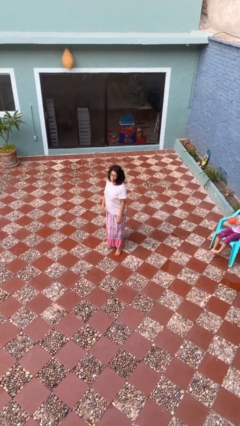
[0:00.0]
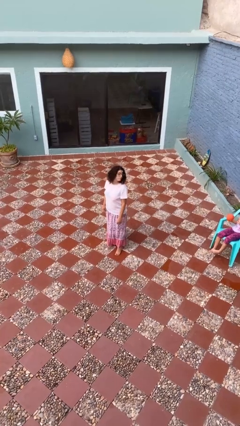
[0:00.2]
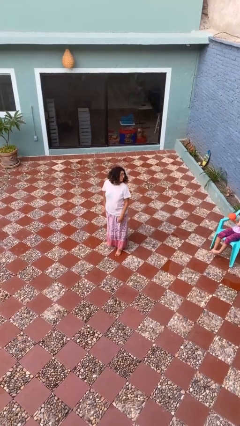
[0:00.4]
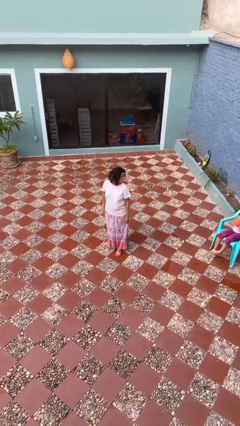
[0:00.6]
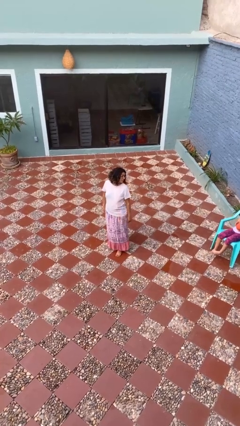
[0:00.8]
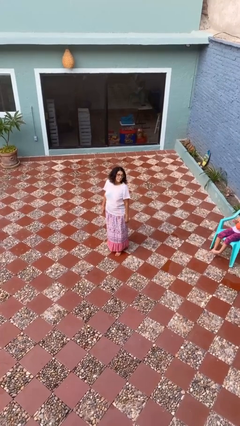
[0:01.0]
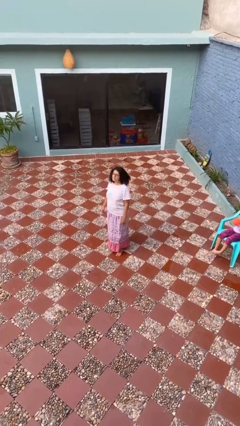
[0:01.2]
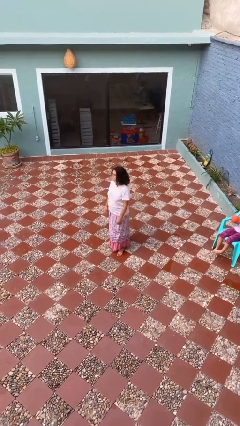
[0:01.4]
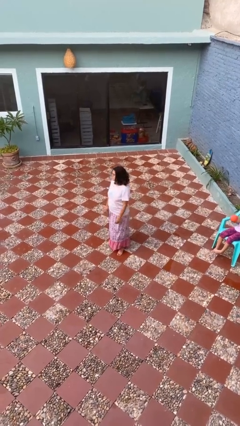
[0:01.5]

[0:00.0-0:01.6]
person looks over shoulder

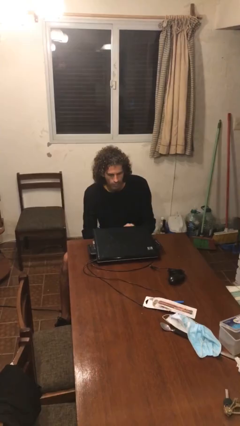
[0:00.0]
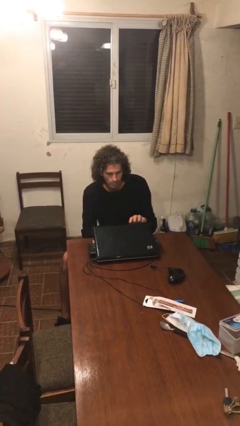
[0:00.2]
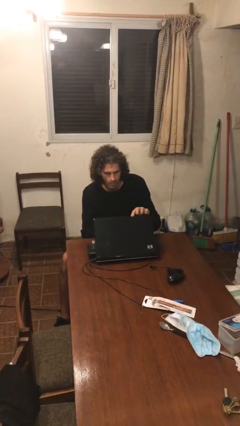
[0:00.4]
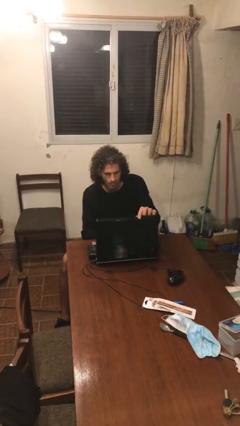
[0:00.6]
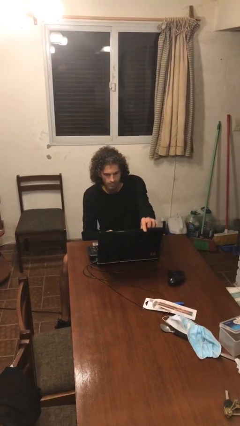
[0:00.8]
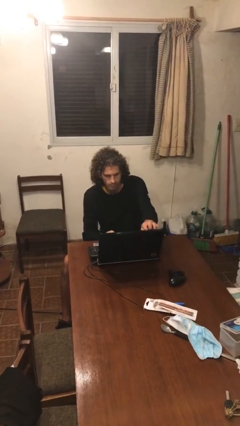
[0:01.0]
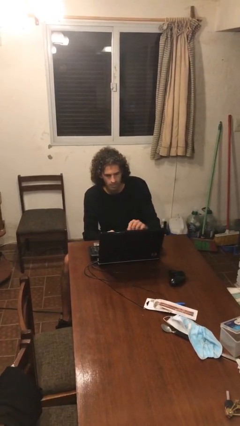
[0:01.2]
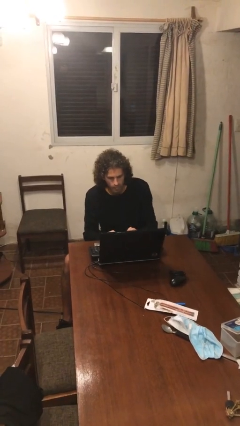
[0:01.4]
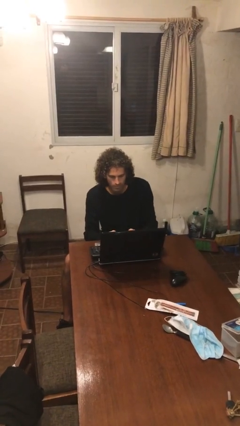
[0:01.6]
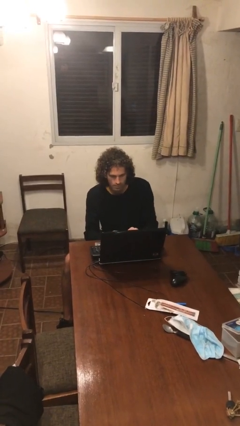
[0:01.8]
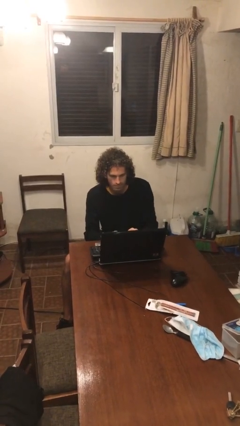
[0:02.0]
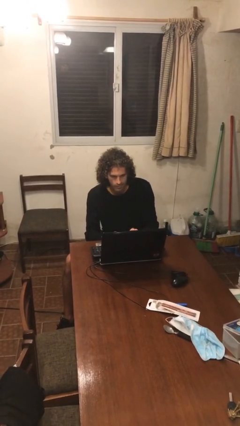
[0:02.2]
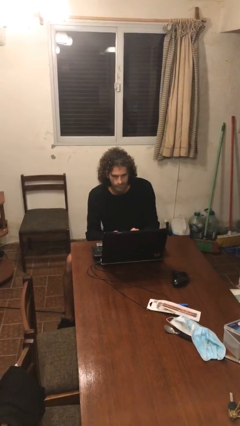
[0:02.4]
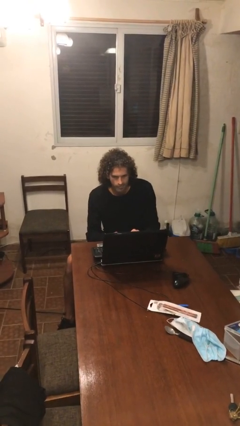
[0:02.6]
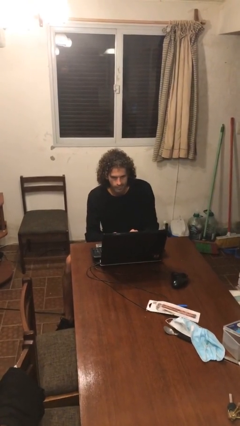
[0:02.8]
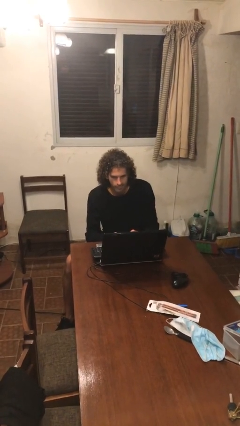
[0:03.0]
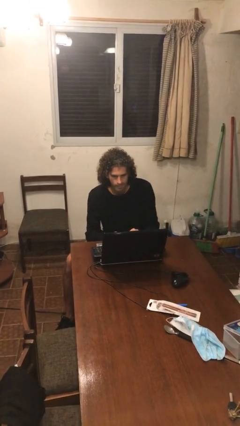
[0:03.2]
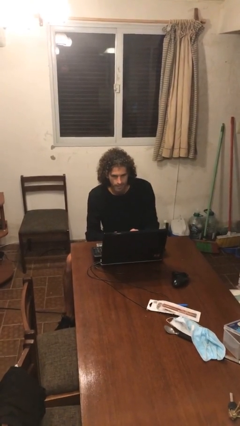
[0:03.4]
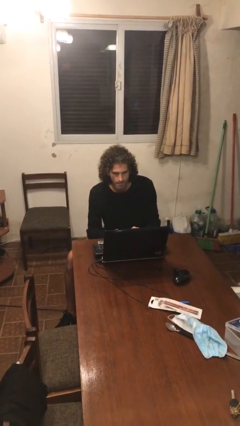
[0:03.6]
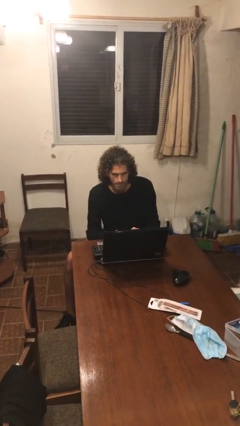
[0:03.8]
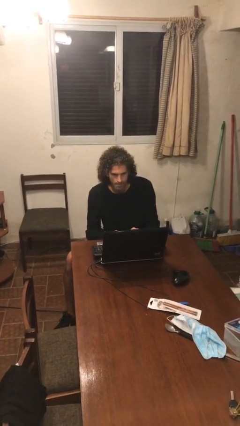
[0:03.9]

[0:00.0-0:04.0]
person interacts with laptop

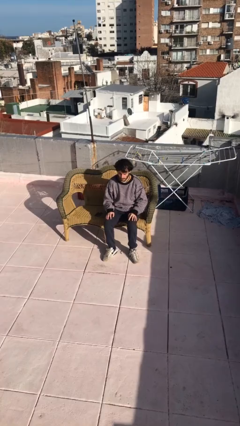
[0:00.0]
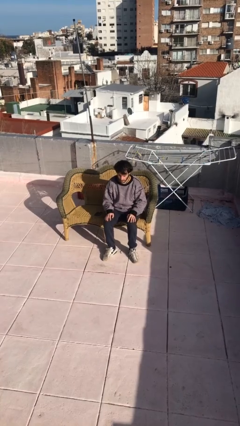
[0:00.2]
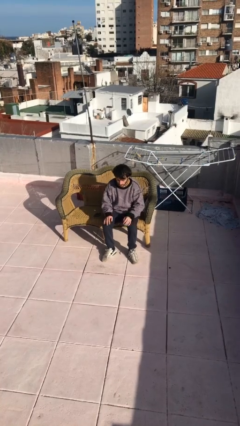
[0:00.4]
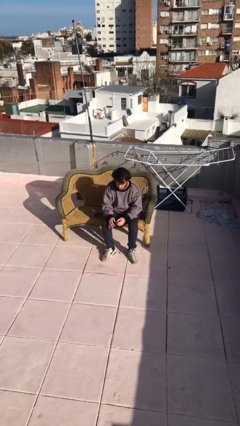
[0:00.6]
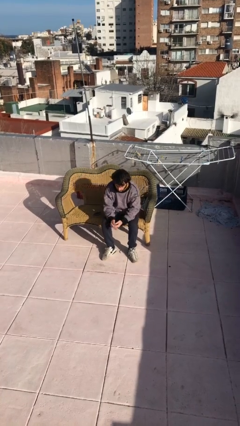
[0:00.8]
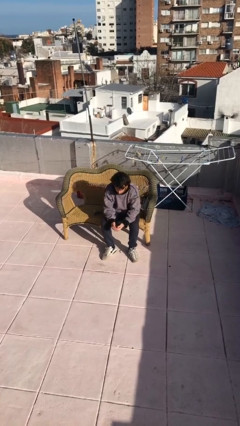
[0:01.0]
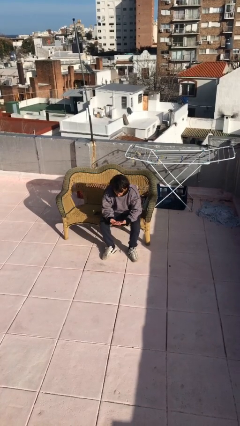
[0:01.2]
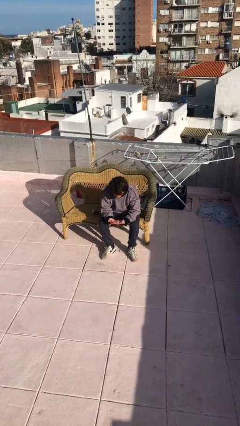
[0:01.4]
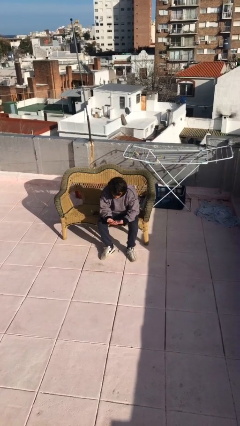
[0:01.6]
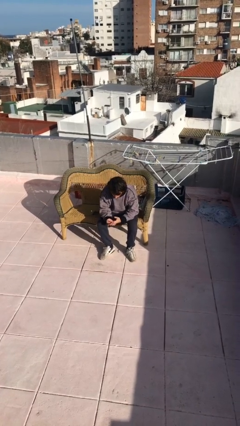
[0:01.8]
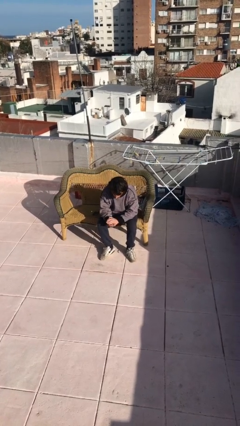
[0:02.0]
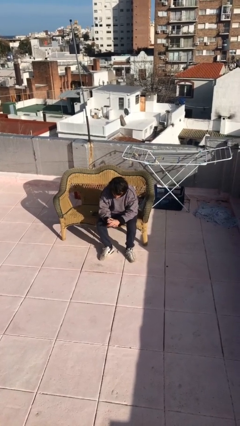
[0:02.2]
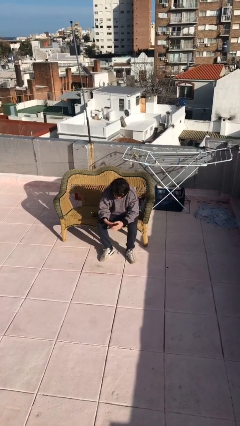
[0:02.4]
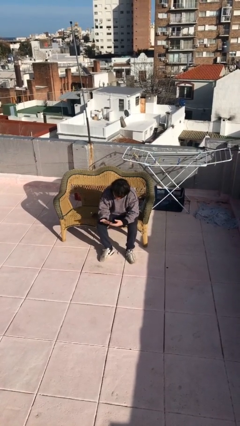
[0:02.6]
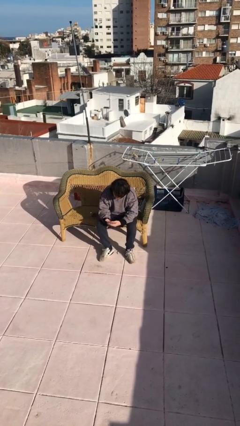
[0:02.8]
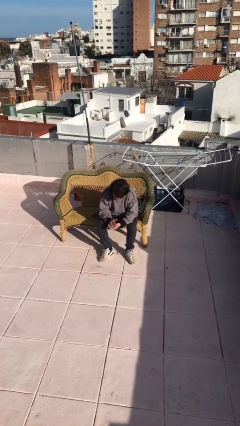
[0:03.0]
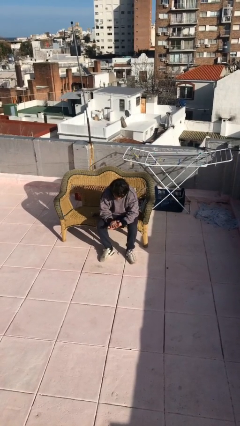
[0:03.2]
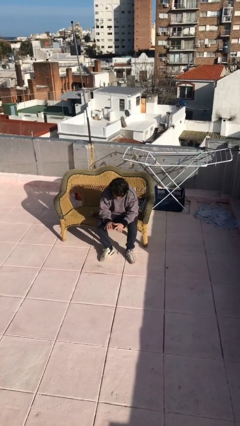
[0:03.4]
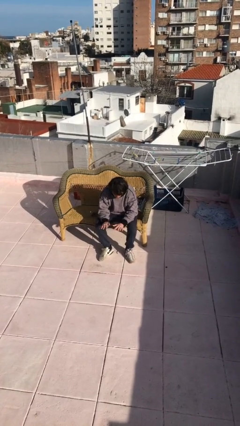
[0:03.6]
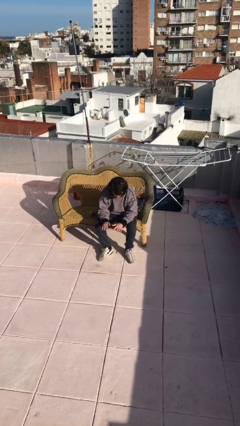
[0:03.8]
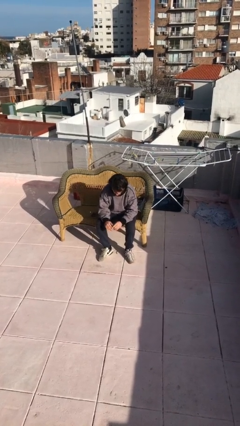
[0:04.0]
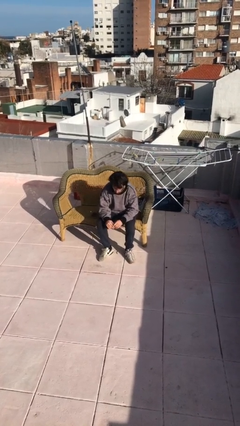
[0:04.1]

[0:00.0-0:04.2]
person looks at hands in lap

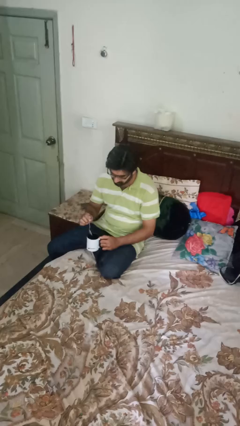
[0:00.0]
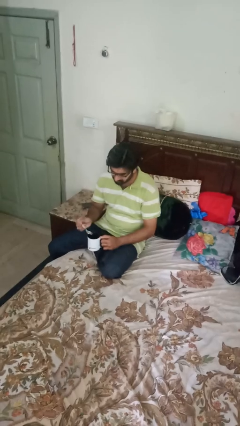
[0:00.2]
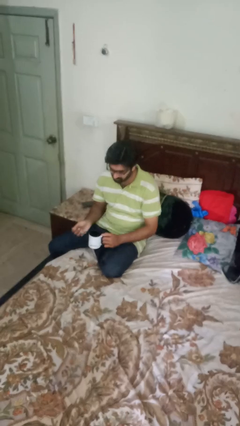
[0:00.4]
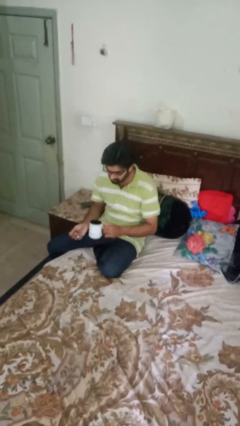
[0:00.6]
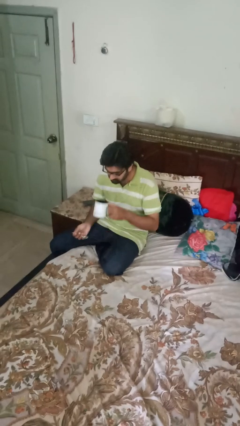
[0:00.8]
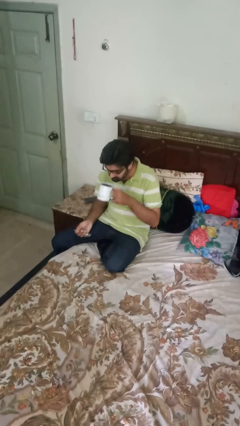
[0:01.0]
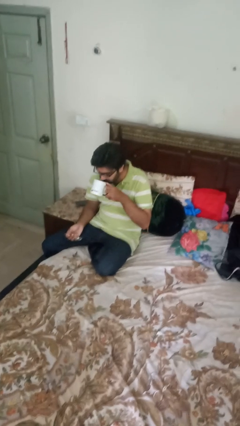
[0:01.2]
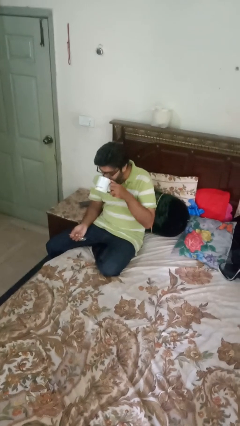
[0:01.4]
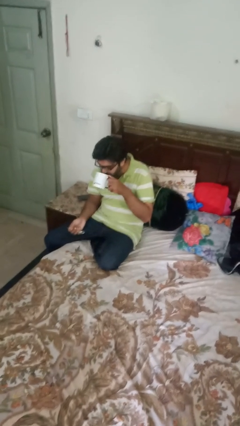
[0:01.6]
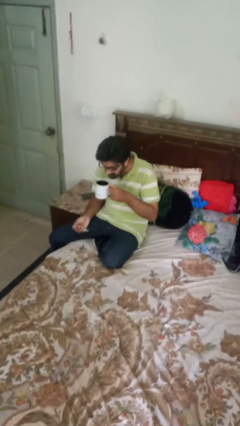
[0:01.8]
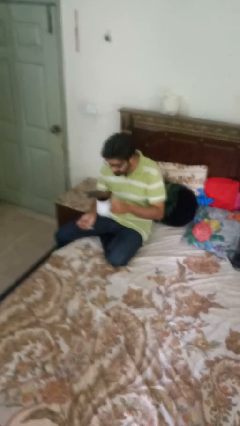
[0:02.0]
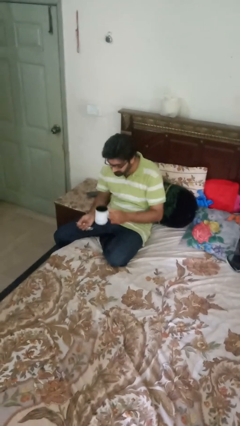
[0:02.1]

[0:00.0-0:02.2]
person drinks from mug

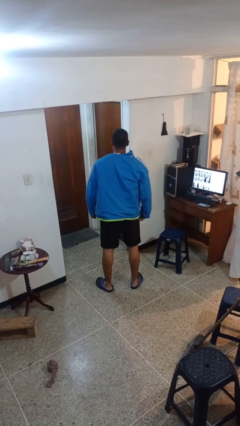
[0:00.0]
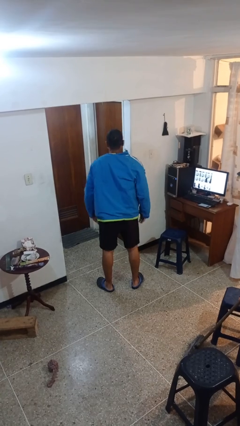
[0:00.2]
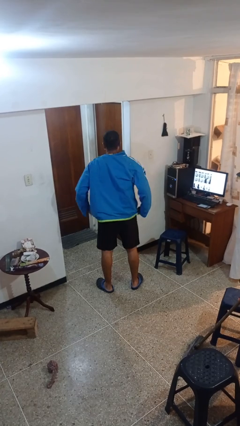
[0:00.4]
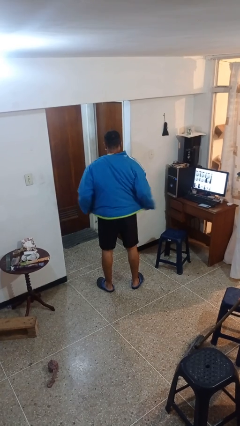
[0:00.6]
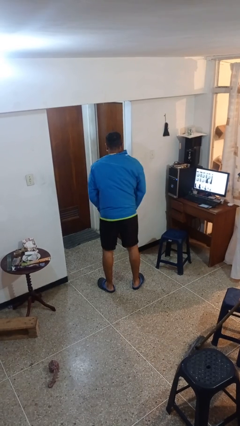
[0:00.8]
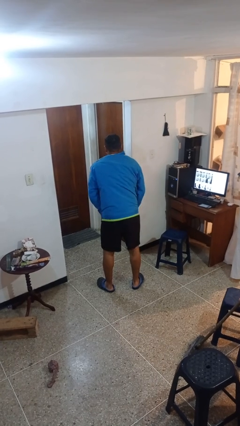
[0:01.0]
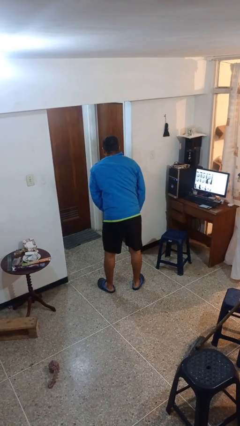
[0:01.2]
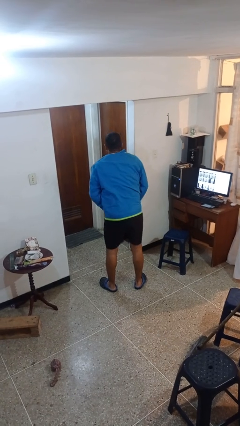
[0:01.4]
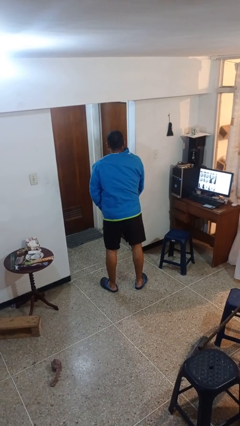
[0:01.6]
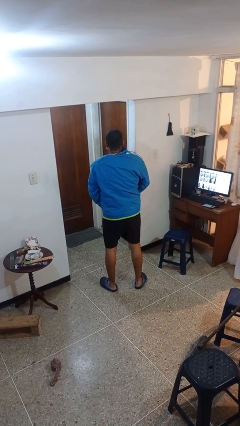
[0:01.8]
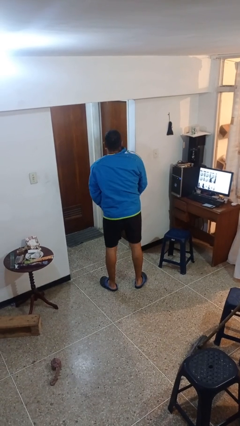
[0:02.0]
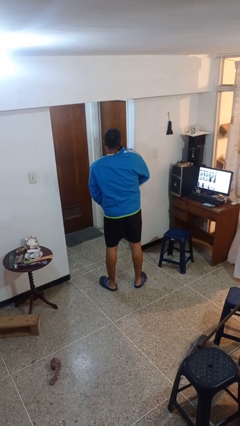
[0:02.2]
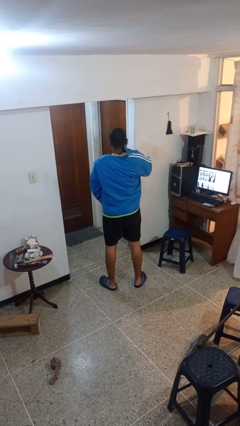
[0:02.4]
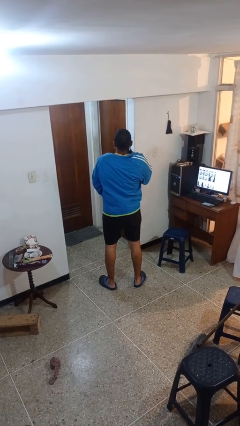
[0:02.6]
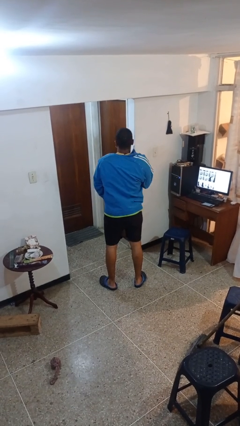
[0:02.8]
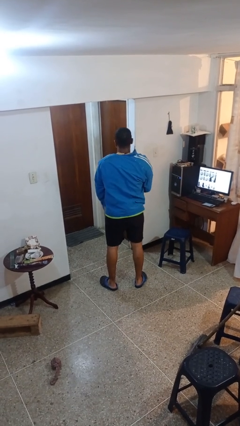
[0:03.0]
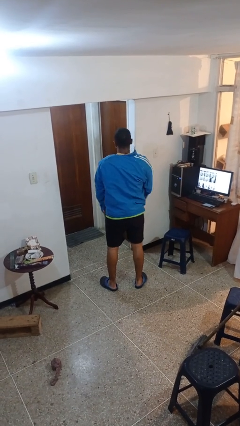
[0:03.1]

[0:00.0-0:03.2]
person zips up jacket

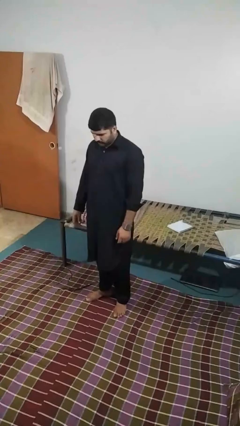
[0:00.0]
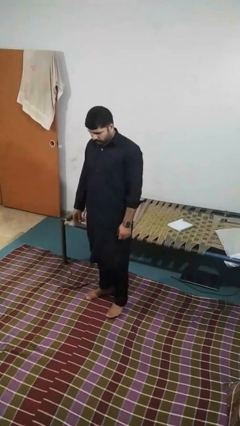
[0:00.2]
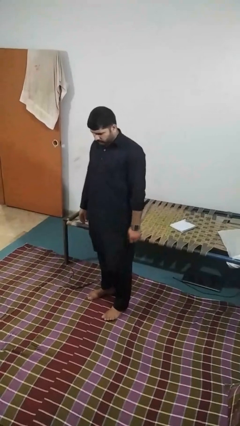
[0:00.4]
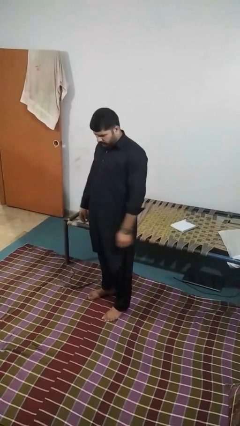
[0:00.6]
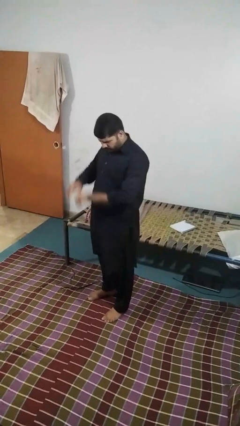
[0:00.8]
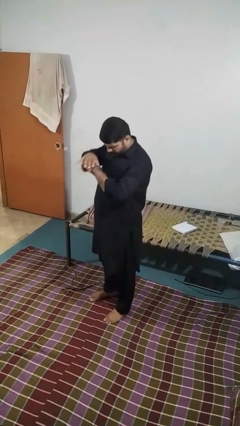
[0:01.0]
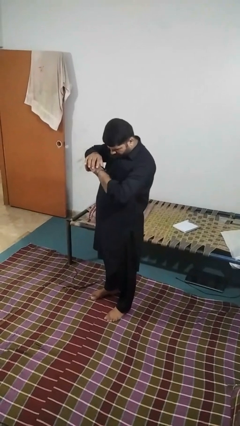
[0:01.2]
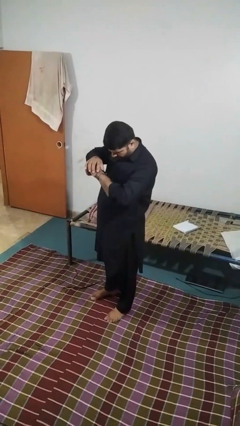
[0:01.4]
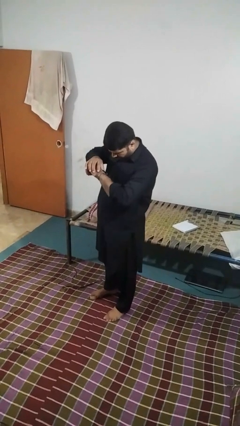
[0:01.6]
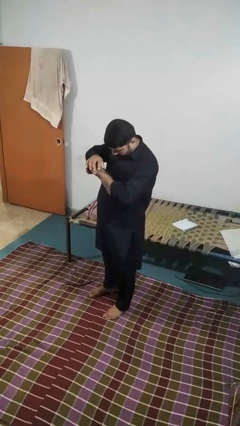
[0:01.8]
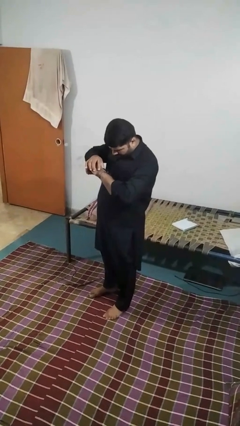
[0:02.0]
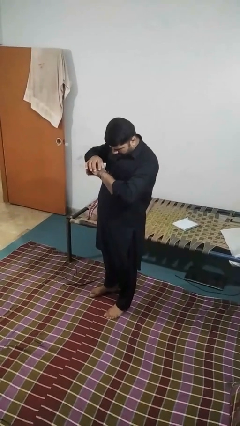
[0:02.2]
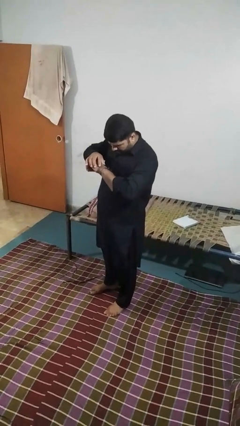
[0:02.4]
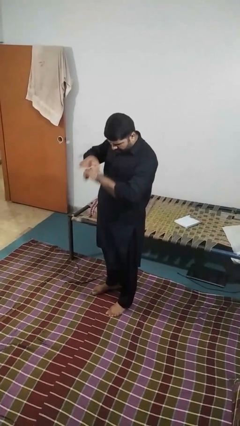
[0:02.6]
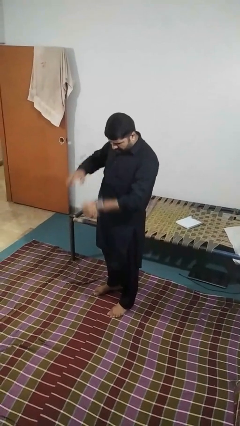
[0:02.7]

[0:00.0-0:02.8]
person looks at wristwatch
